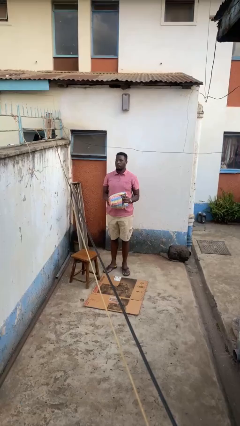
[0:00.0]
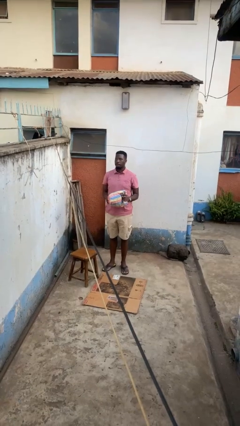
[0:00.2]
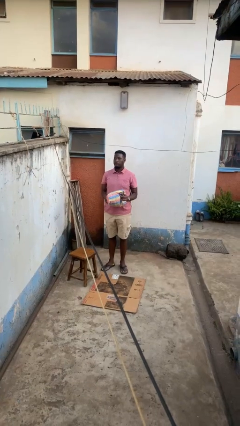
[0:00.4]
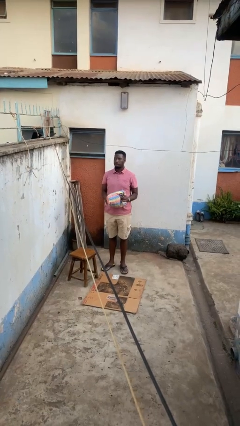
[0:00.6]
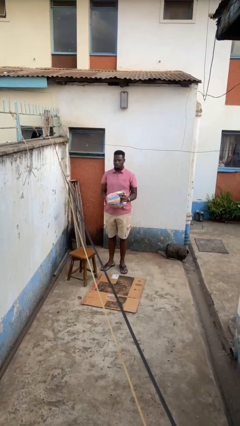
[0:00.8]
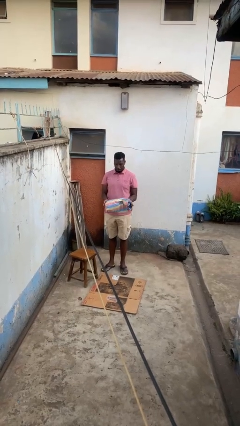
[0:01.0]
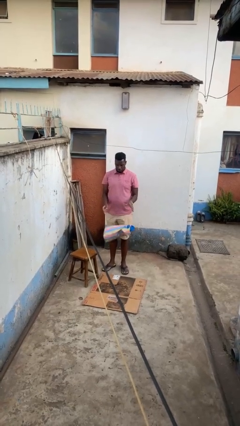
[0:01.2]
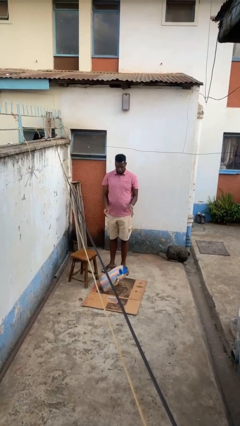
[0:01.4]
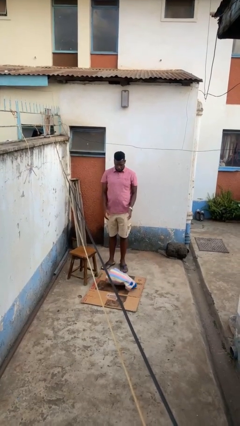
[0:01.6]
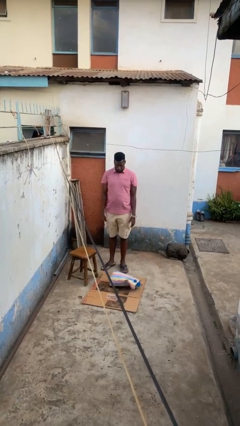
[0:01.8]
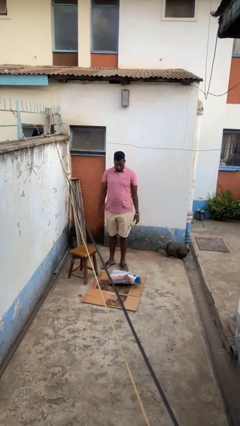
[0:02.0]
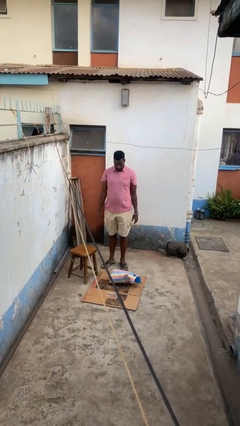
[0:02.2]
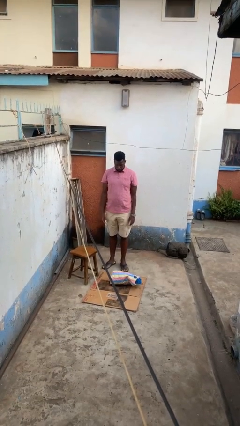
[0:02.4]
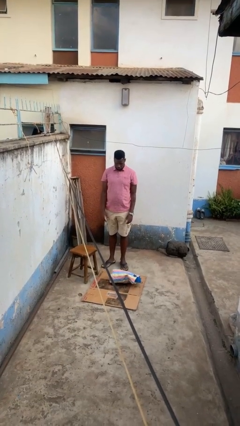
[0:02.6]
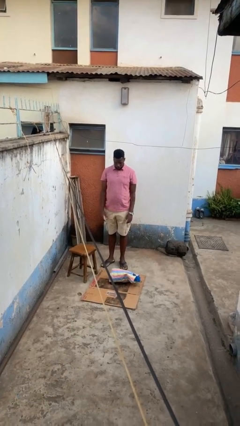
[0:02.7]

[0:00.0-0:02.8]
person drops object

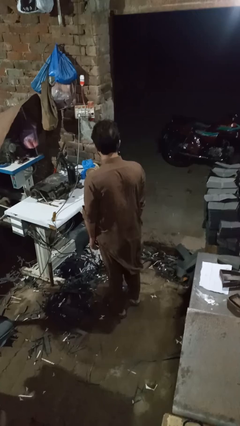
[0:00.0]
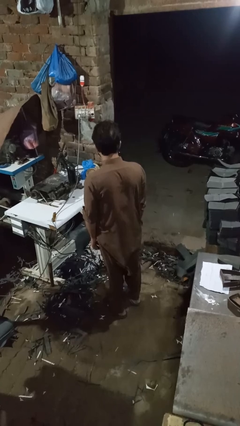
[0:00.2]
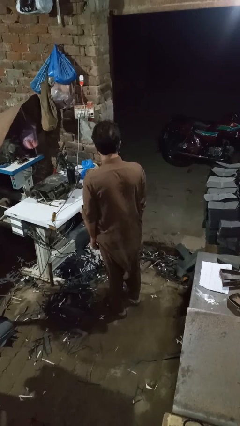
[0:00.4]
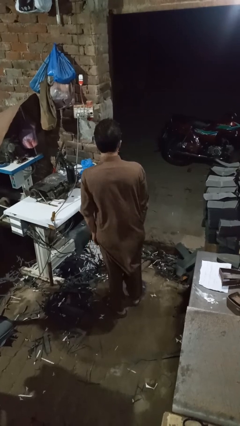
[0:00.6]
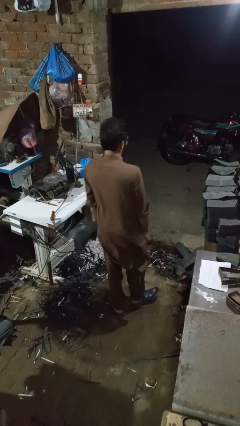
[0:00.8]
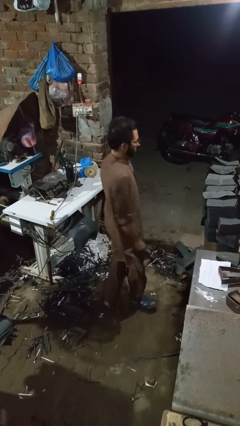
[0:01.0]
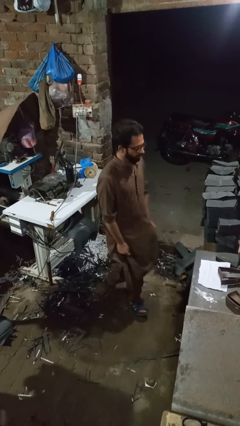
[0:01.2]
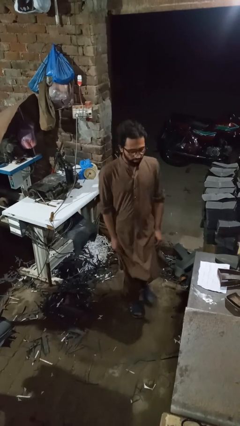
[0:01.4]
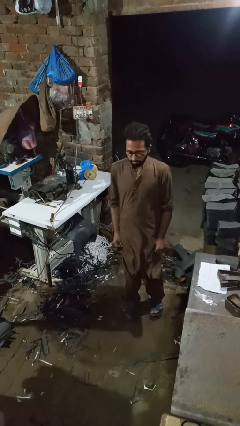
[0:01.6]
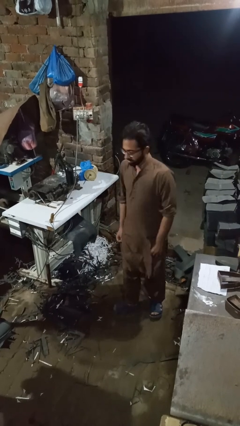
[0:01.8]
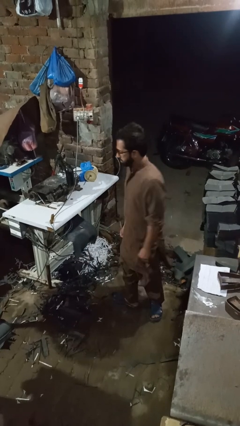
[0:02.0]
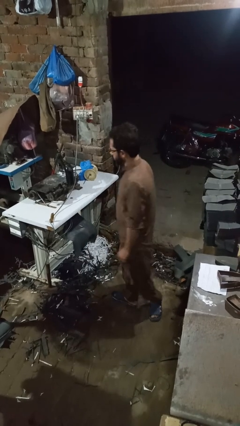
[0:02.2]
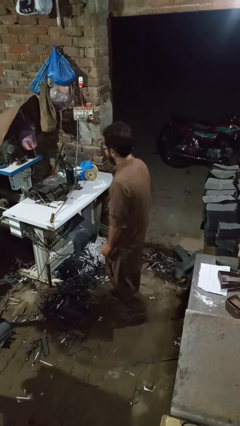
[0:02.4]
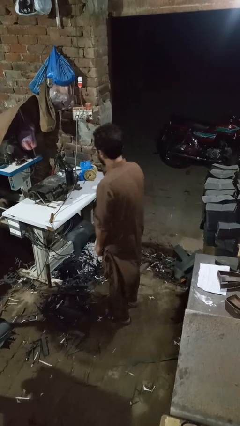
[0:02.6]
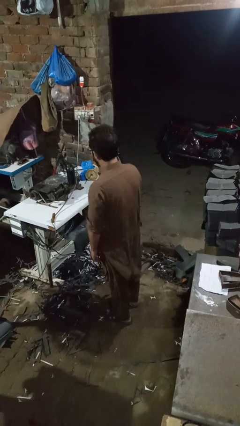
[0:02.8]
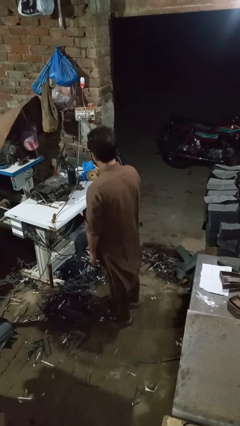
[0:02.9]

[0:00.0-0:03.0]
person twirls

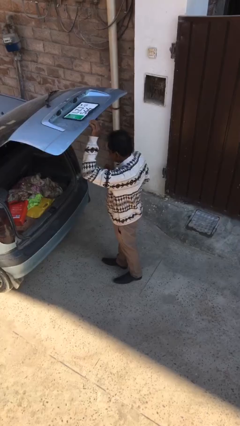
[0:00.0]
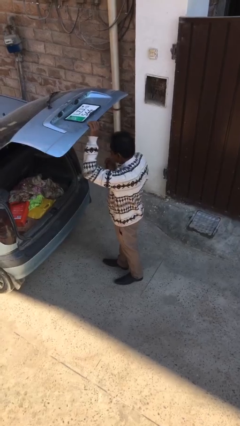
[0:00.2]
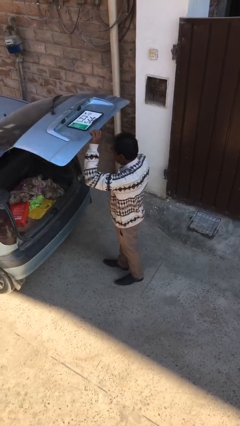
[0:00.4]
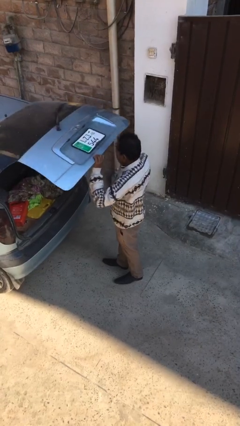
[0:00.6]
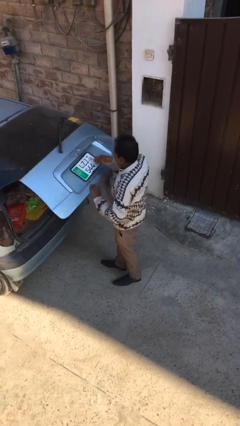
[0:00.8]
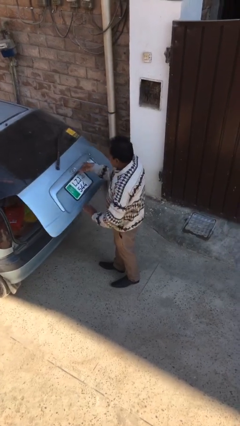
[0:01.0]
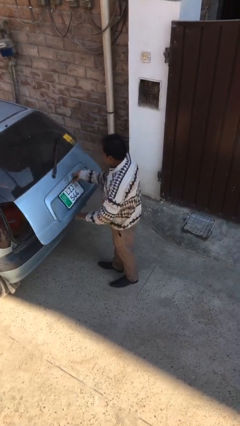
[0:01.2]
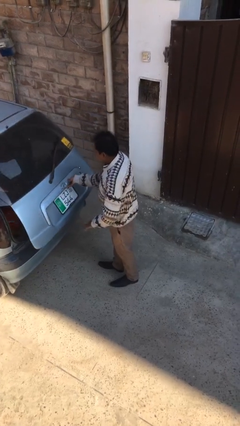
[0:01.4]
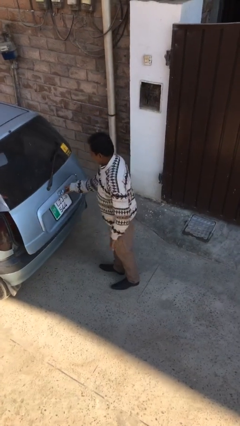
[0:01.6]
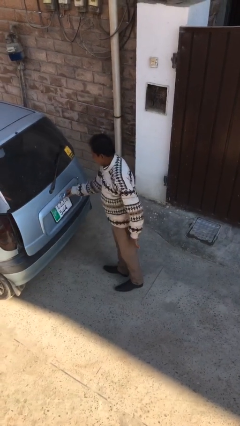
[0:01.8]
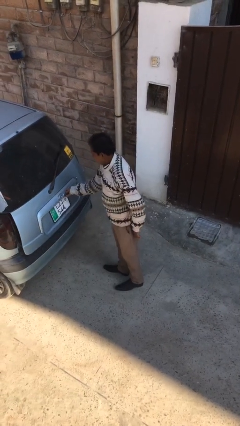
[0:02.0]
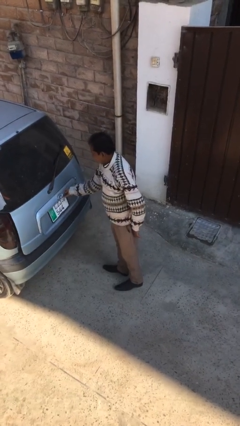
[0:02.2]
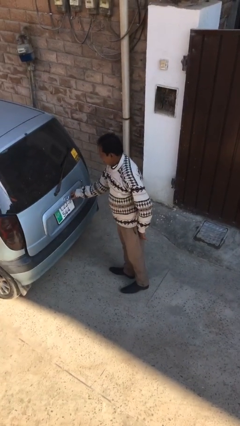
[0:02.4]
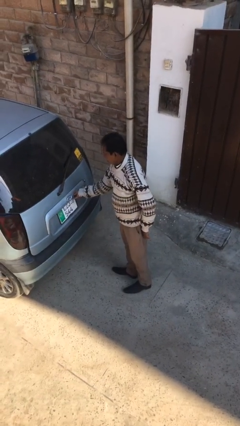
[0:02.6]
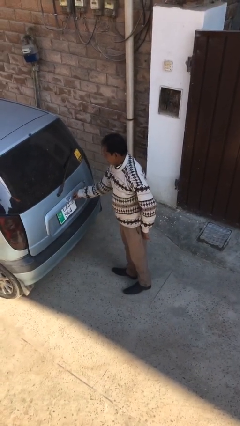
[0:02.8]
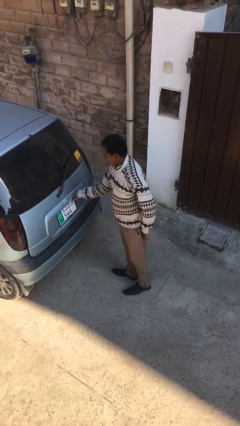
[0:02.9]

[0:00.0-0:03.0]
person closes car trunk

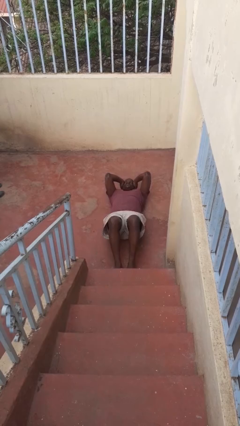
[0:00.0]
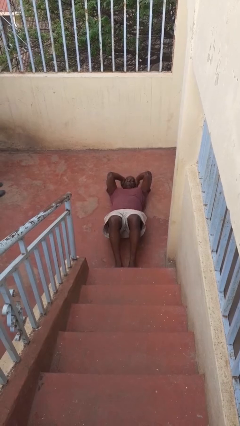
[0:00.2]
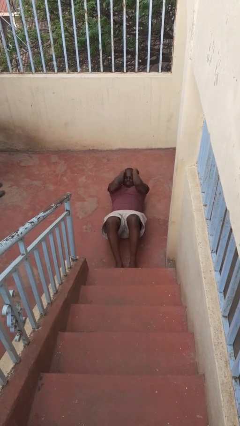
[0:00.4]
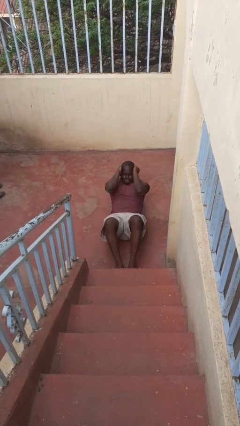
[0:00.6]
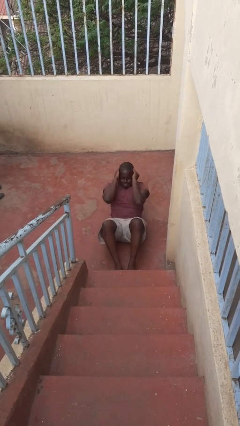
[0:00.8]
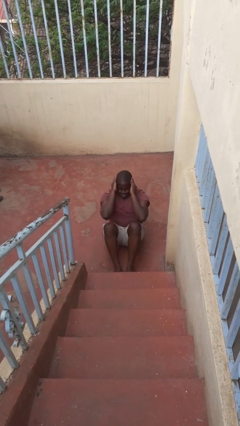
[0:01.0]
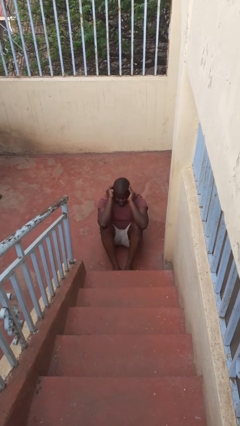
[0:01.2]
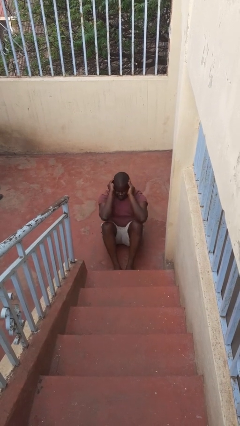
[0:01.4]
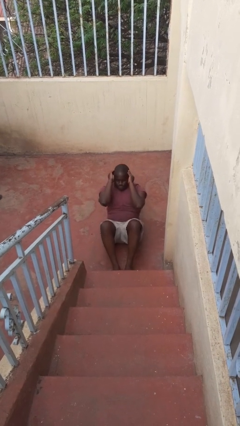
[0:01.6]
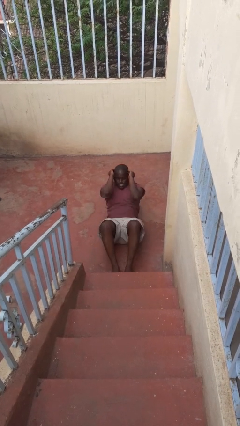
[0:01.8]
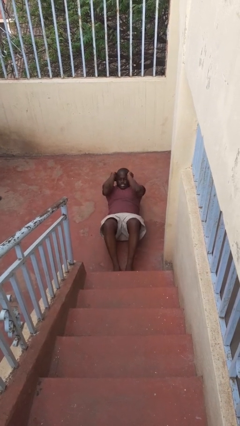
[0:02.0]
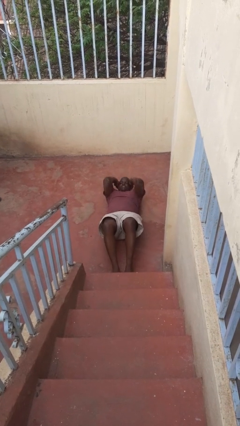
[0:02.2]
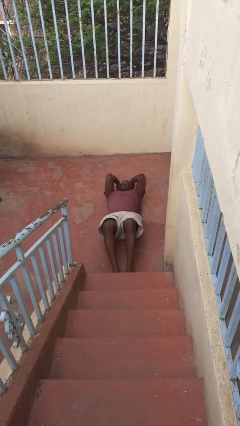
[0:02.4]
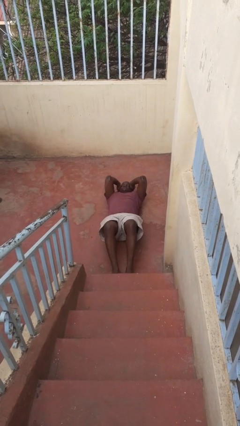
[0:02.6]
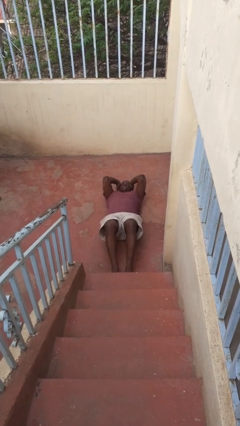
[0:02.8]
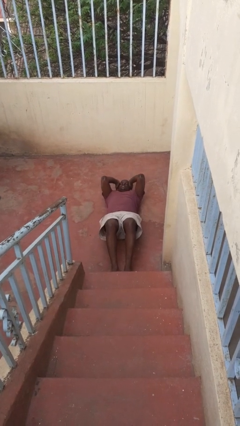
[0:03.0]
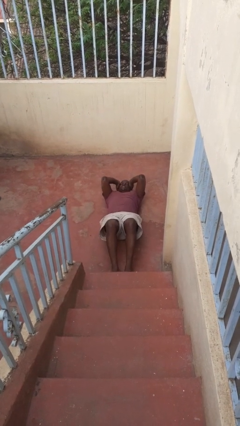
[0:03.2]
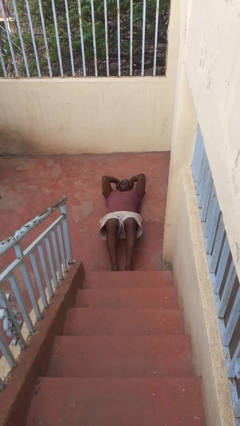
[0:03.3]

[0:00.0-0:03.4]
person exercises with situp

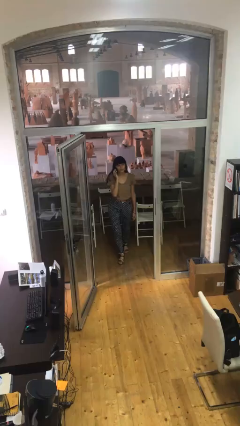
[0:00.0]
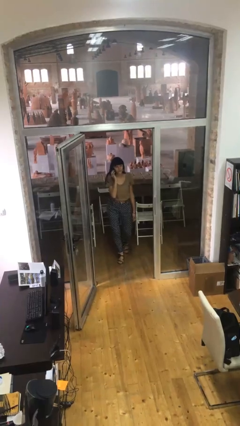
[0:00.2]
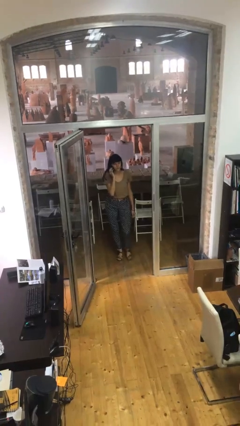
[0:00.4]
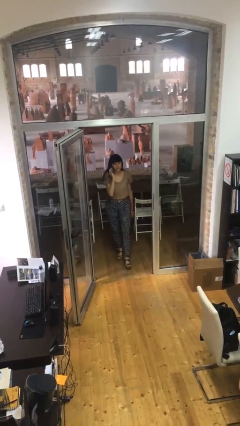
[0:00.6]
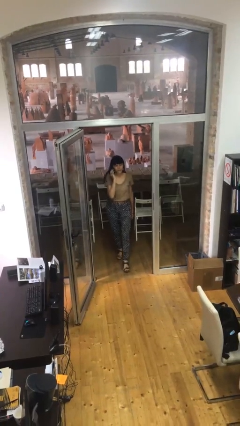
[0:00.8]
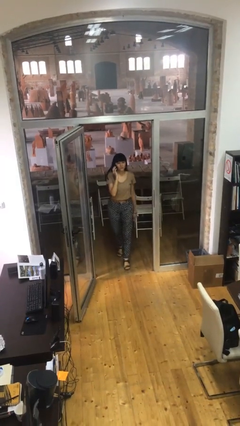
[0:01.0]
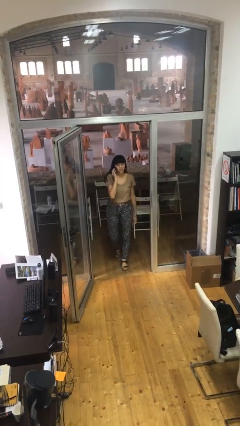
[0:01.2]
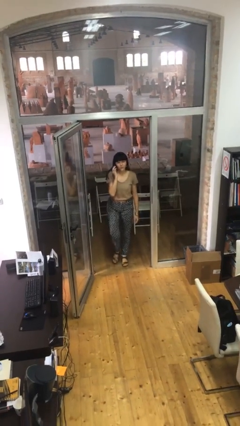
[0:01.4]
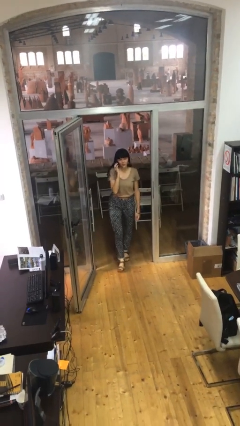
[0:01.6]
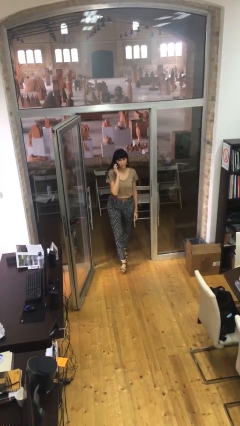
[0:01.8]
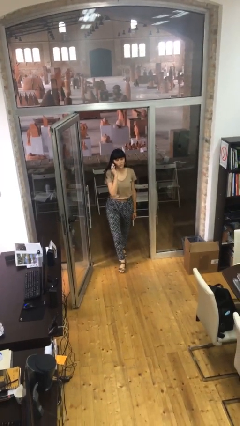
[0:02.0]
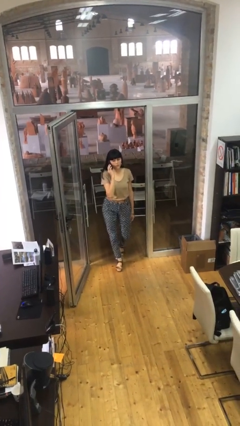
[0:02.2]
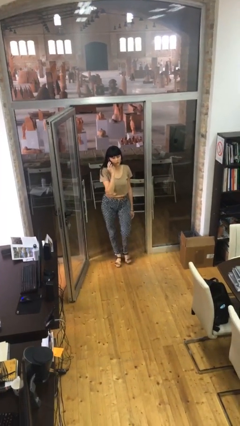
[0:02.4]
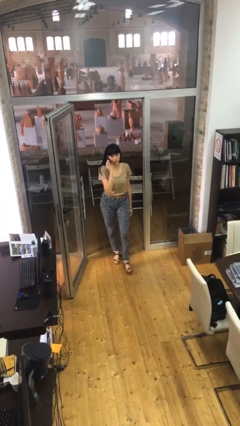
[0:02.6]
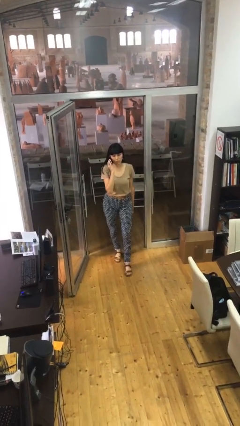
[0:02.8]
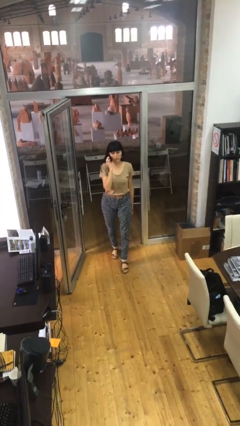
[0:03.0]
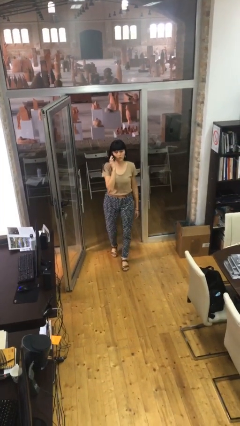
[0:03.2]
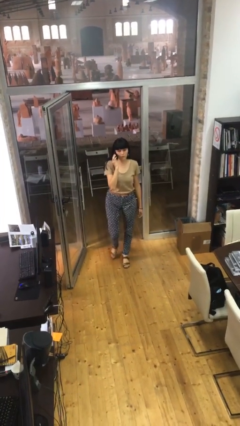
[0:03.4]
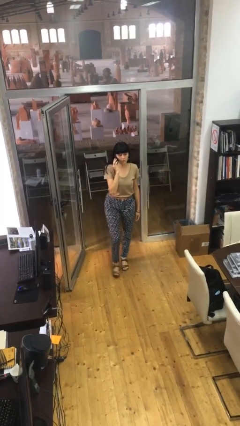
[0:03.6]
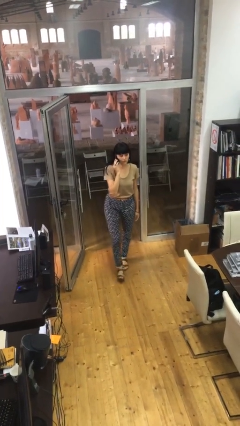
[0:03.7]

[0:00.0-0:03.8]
person enters scene through structure

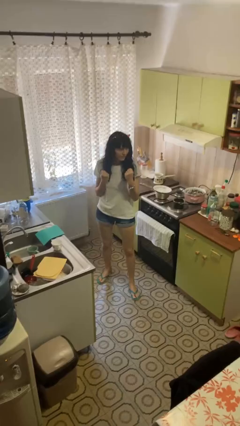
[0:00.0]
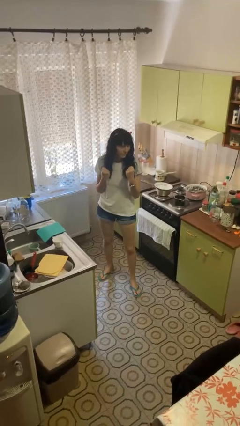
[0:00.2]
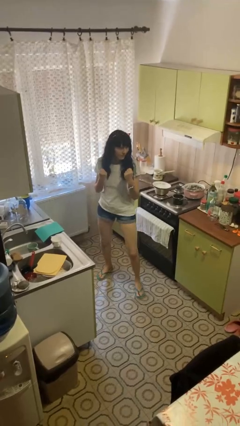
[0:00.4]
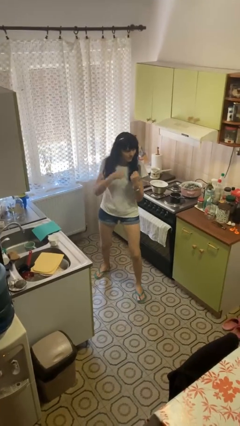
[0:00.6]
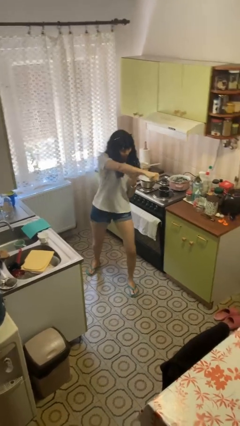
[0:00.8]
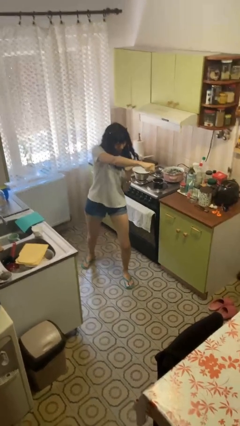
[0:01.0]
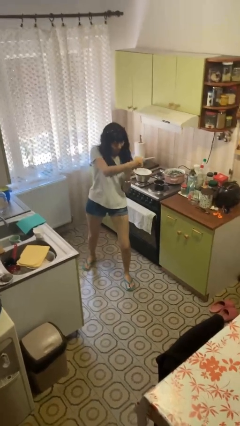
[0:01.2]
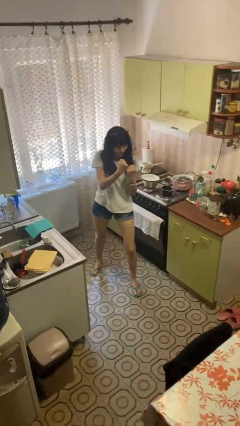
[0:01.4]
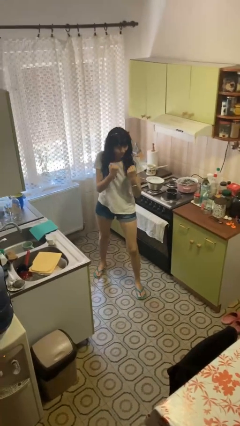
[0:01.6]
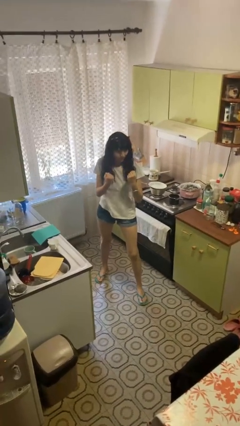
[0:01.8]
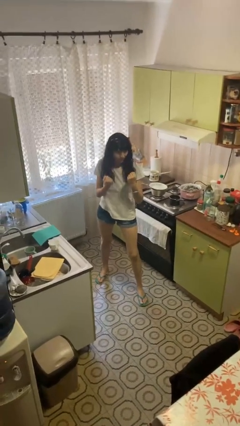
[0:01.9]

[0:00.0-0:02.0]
person punches
